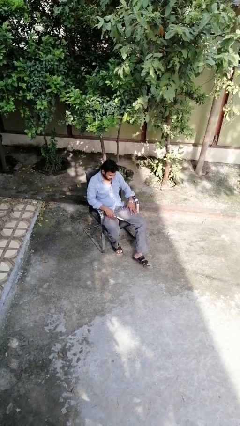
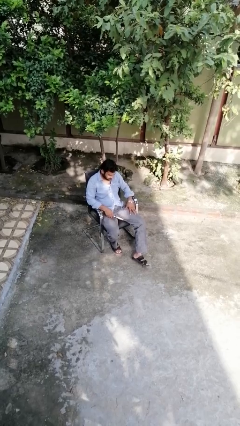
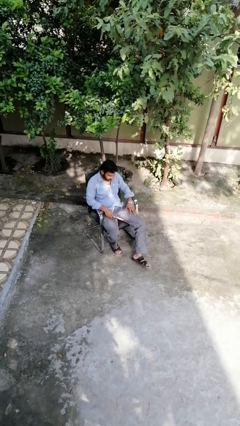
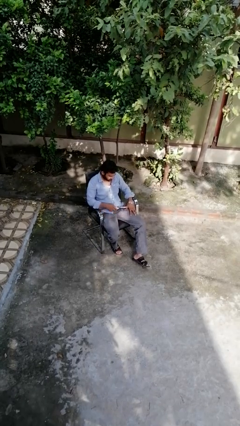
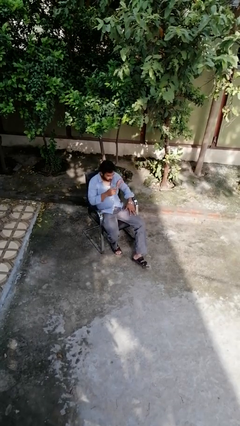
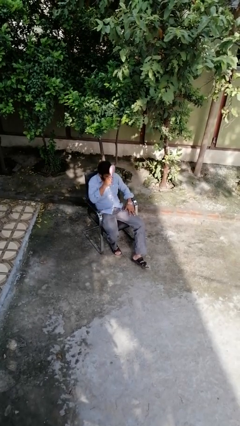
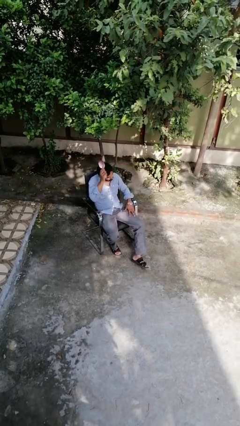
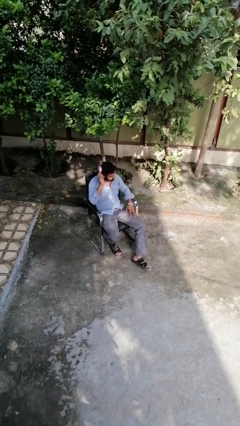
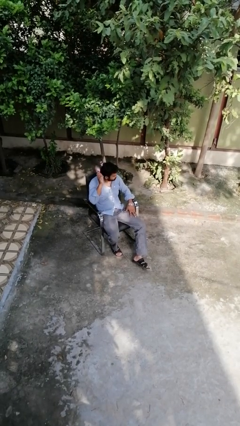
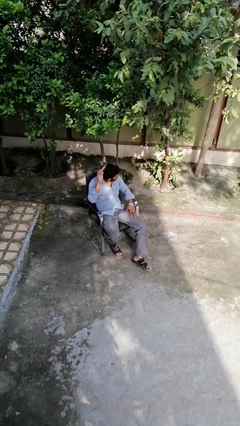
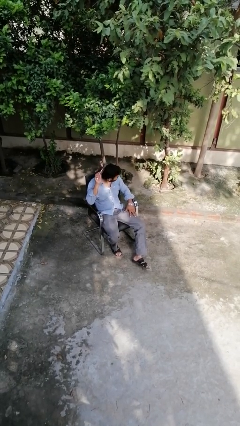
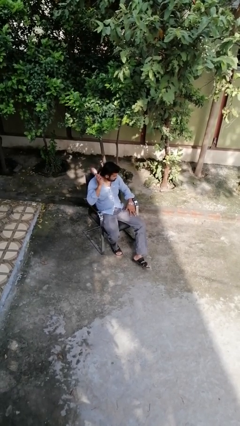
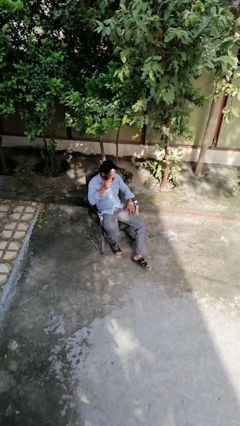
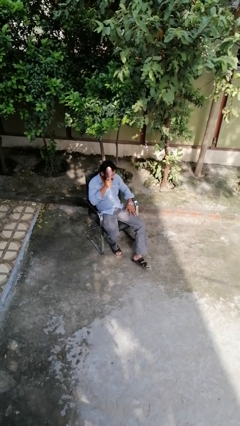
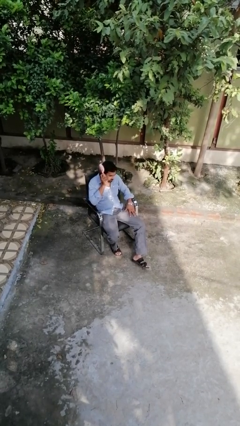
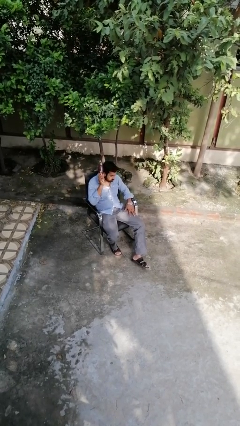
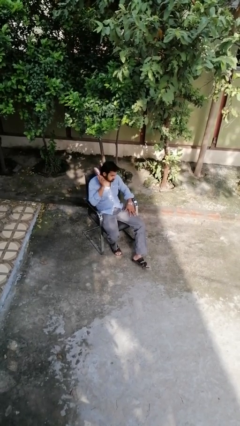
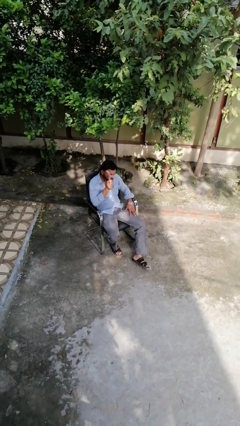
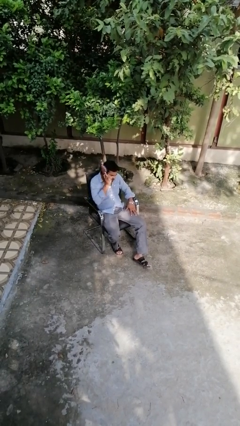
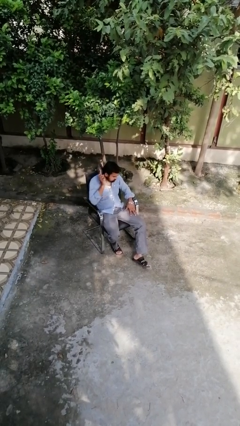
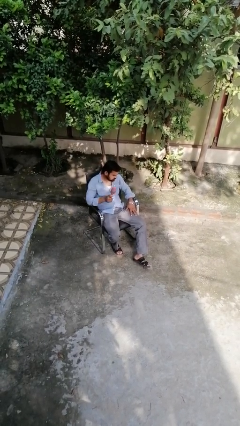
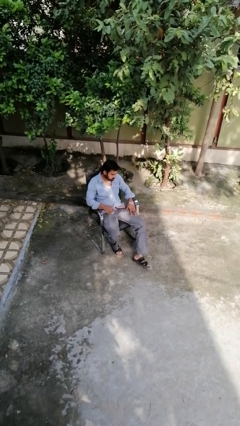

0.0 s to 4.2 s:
person brushes hair

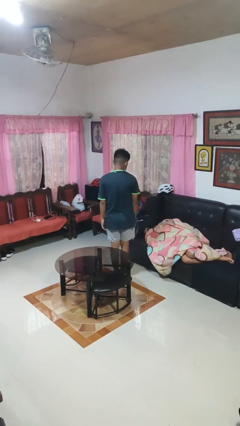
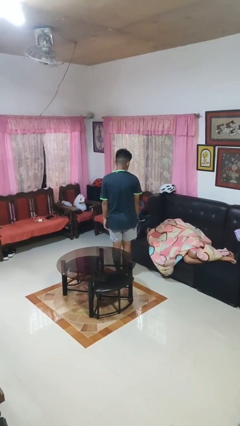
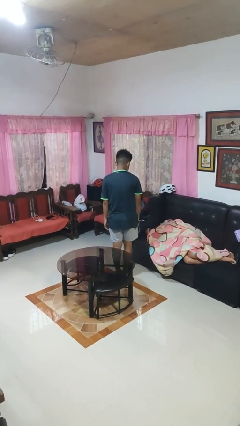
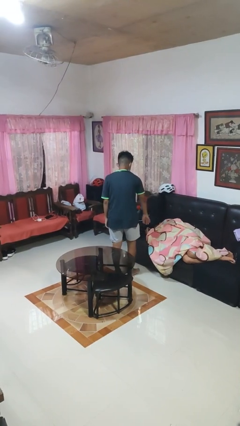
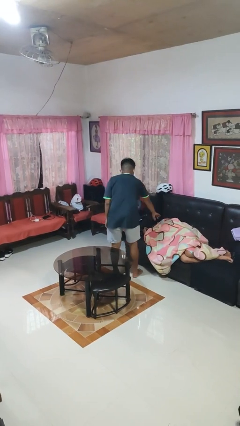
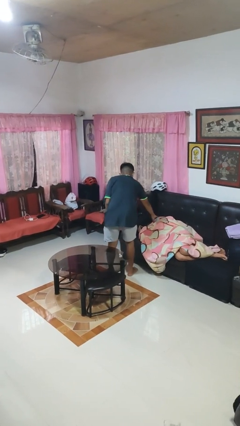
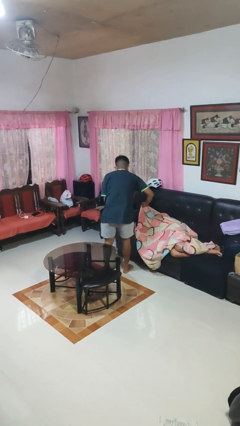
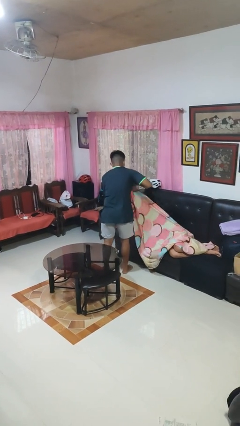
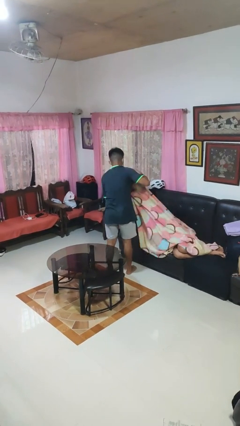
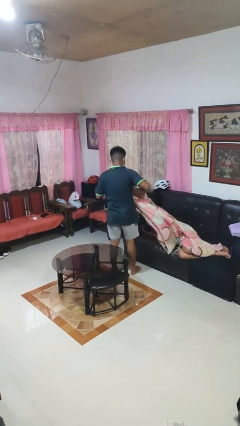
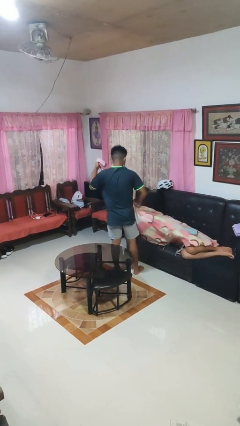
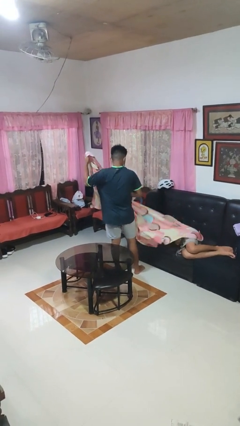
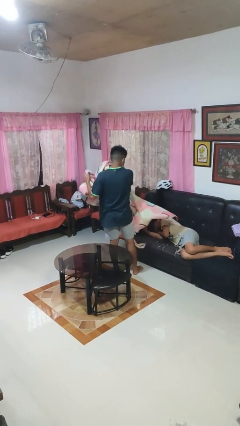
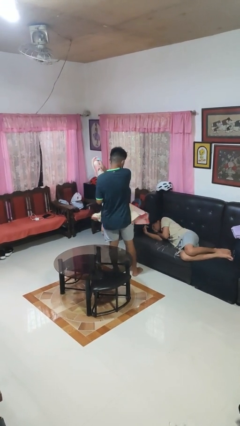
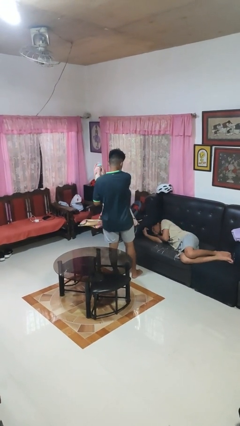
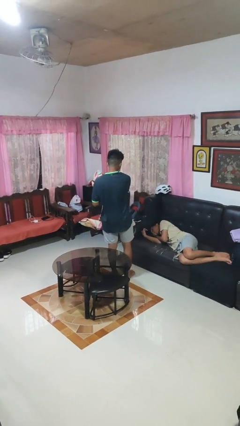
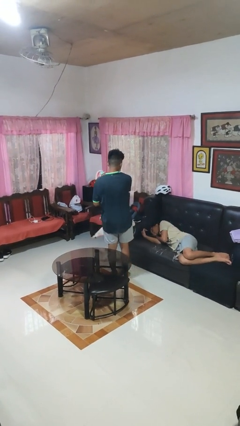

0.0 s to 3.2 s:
person uncovers friend with blanket

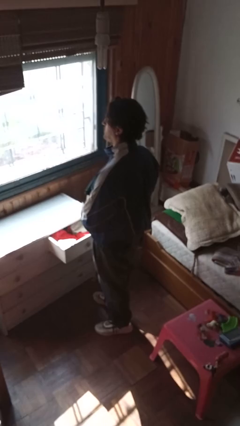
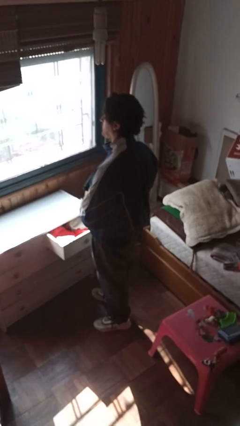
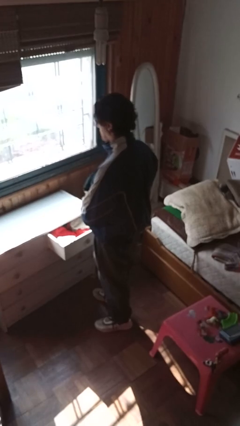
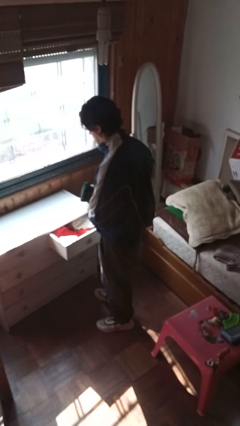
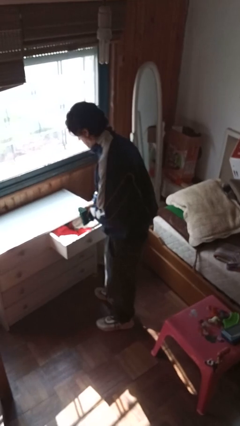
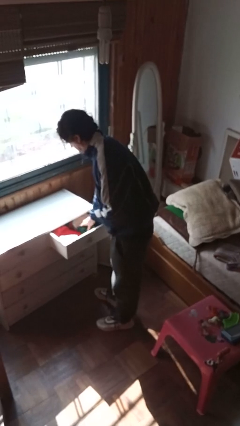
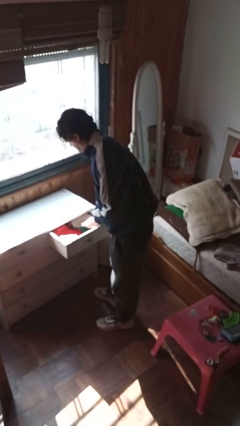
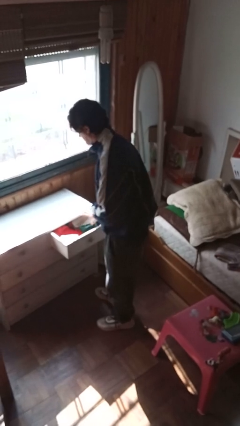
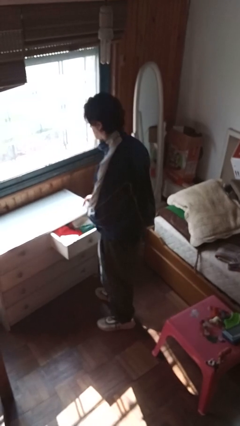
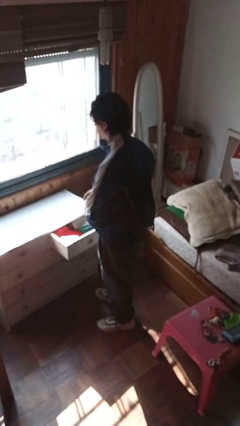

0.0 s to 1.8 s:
person puts clothes into dresser

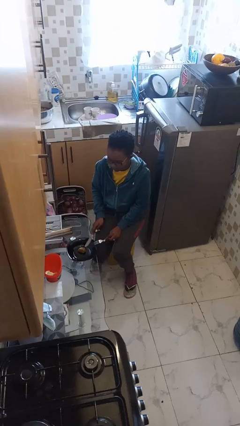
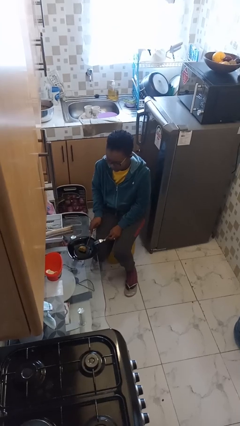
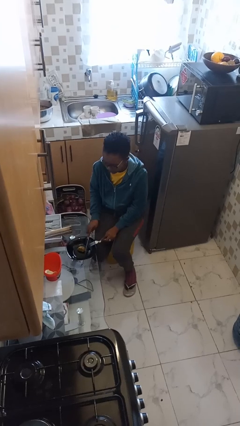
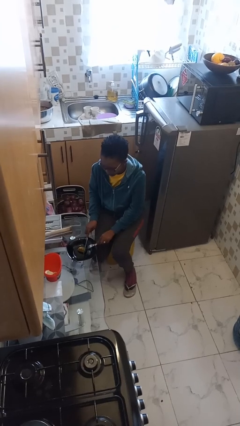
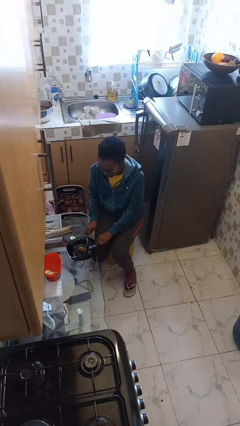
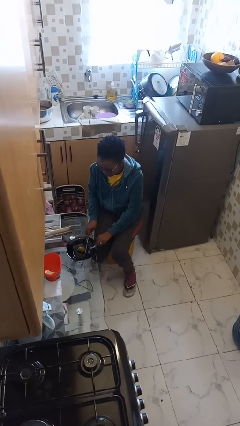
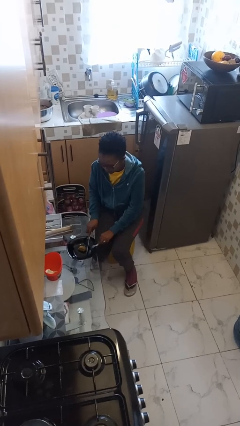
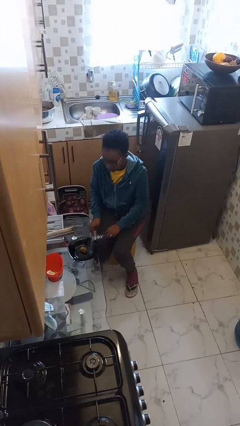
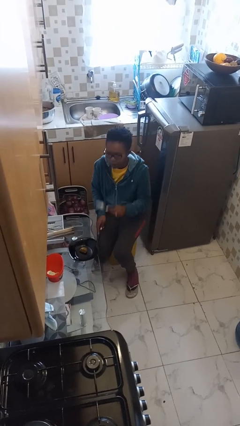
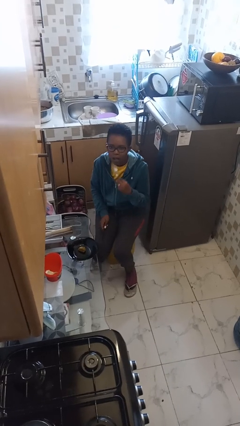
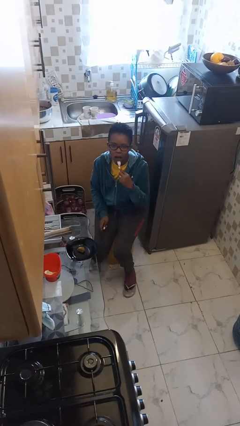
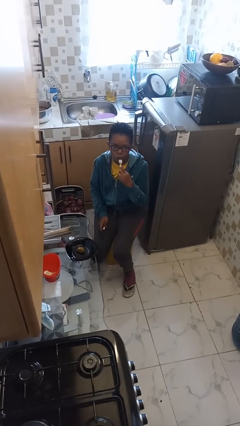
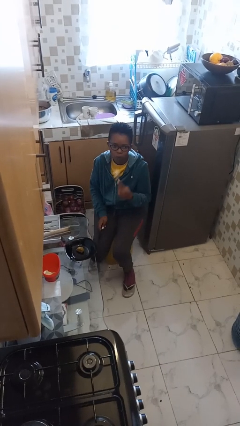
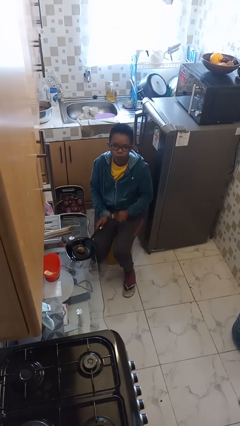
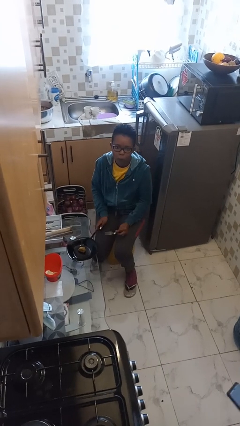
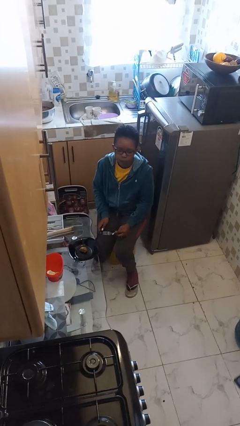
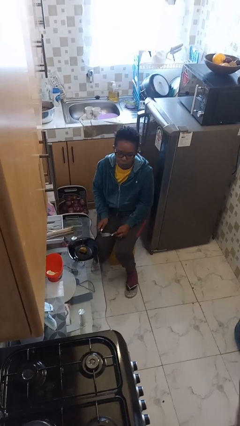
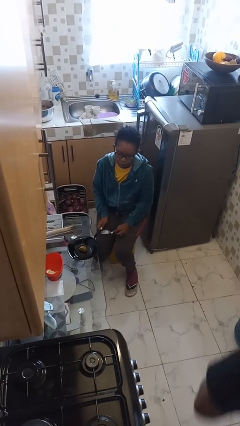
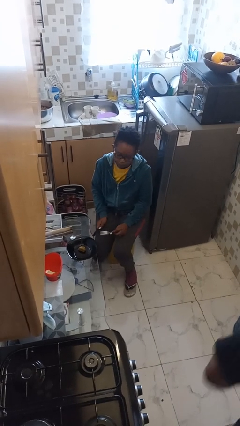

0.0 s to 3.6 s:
person eats with utensil

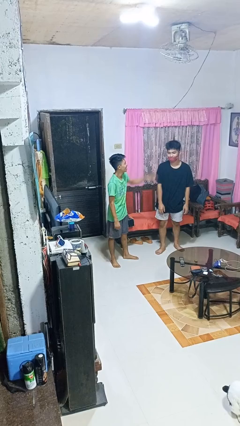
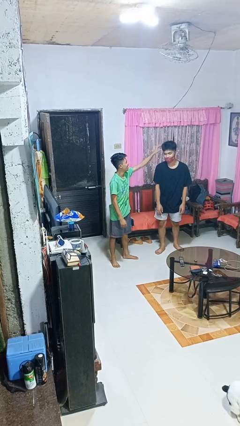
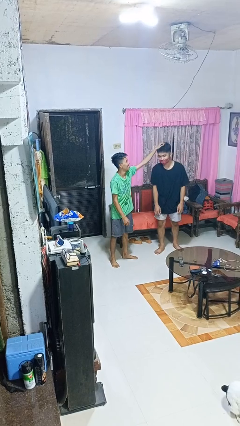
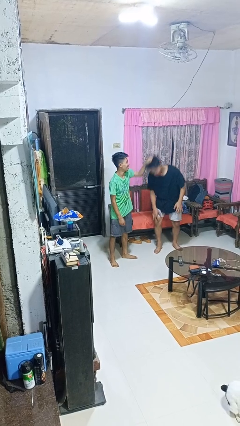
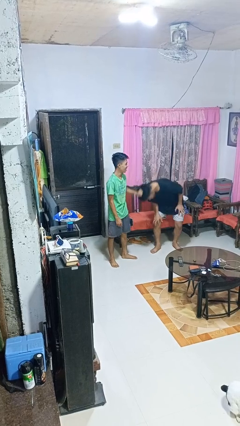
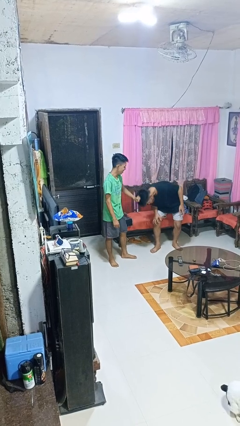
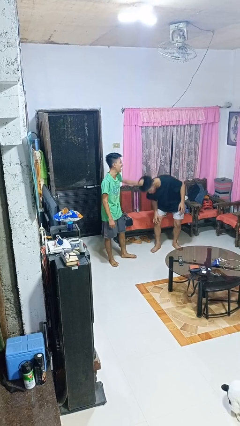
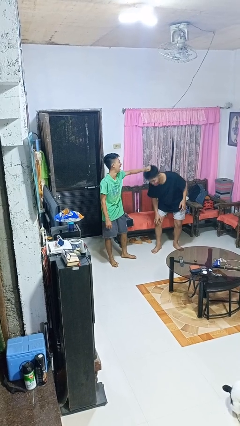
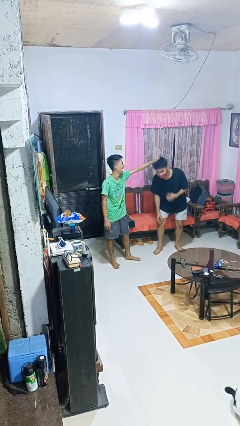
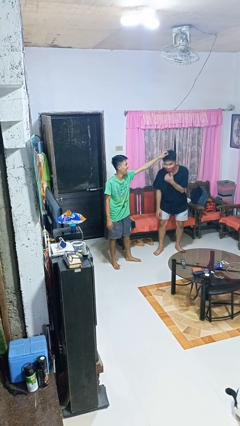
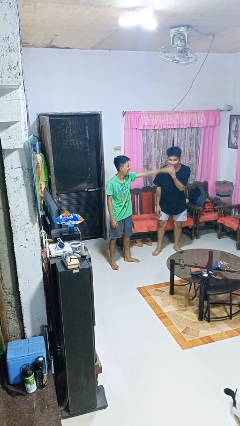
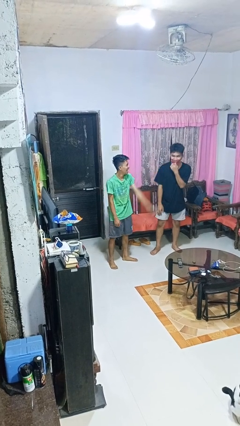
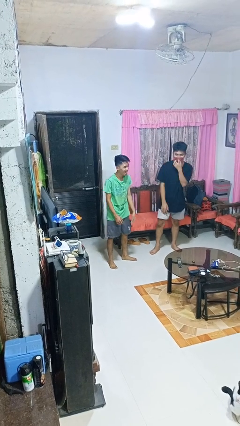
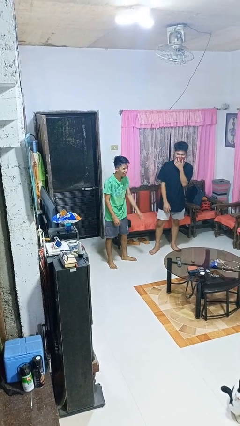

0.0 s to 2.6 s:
person grabs person by hair

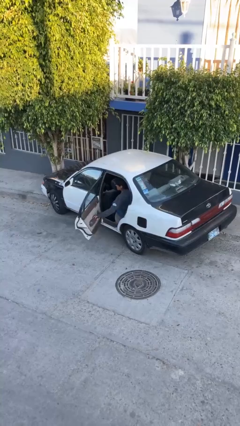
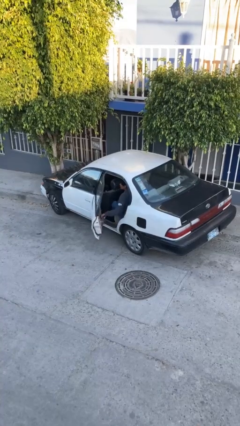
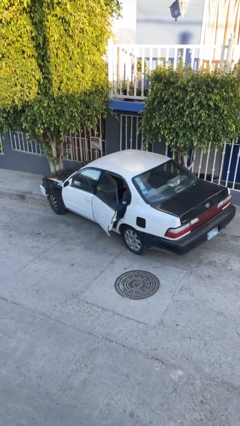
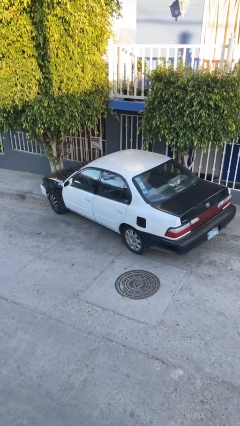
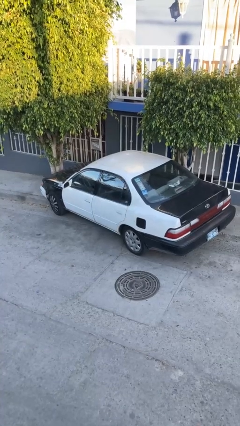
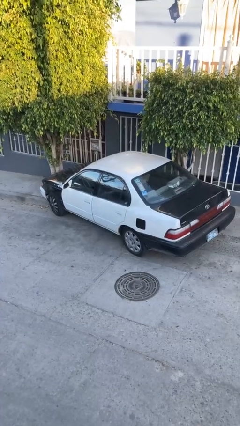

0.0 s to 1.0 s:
person closes car door

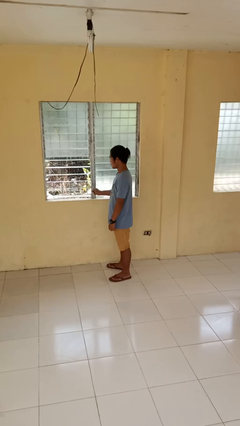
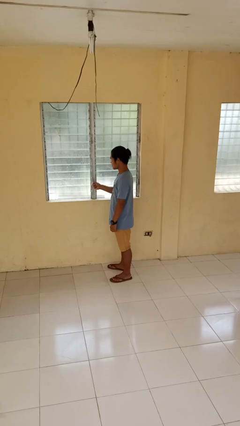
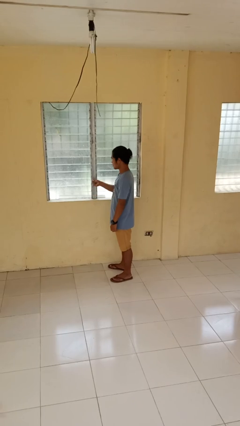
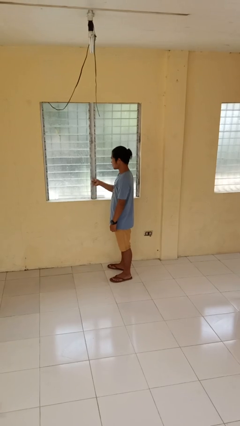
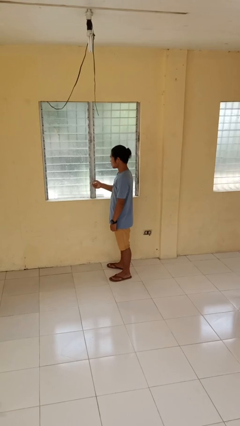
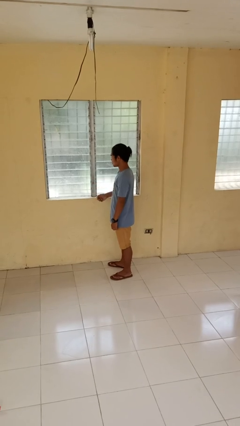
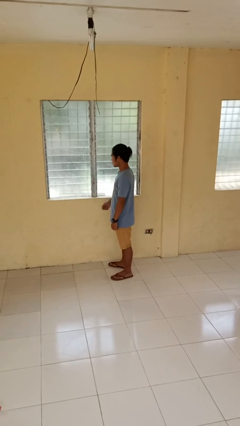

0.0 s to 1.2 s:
person closes home window
